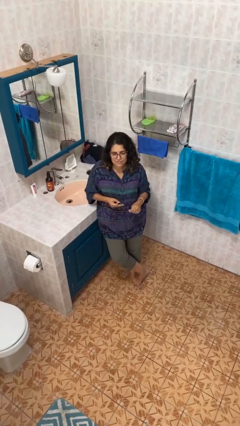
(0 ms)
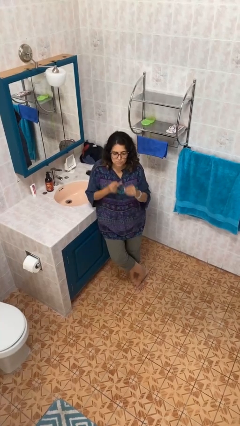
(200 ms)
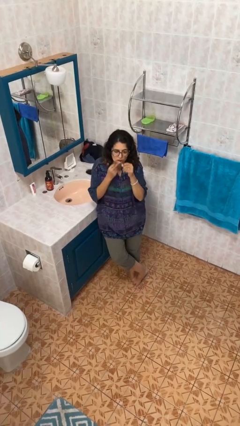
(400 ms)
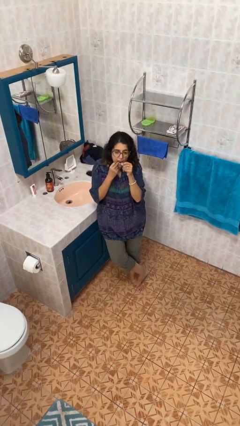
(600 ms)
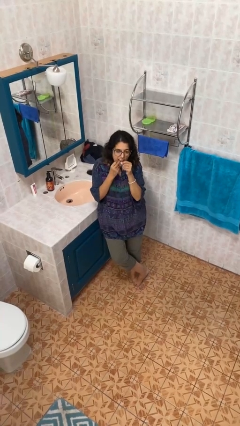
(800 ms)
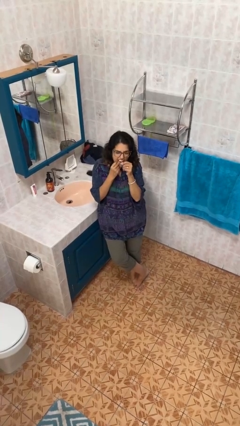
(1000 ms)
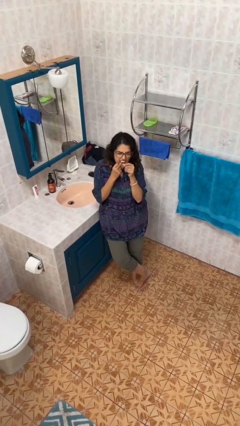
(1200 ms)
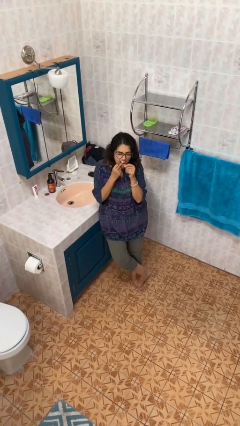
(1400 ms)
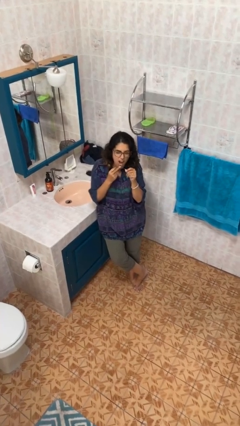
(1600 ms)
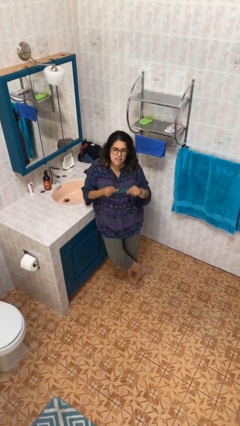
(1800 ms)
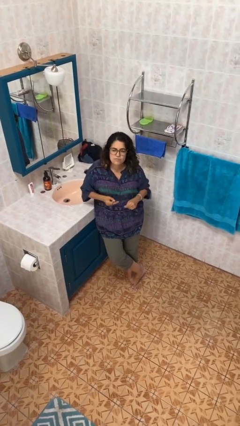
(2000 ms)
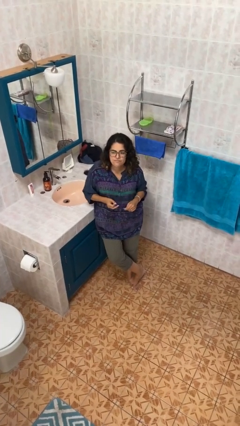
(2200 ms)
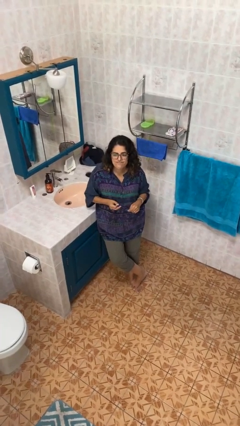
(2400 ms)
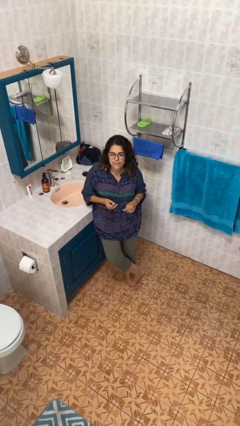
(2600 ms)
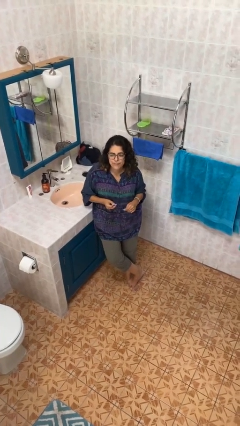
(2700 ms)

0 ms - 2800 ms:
person flosses

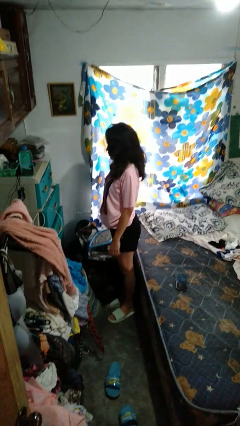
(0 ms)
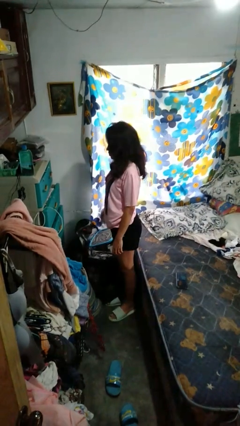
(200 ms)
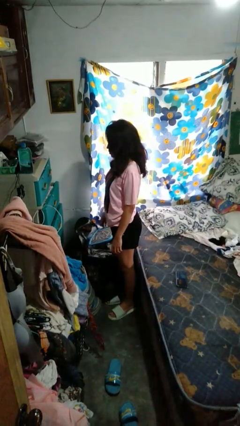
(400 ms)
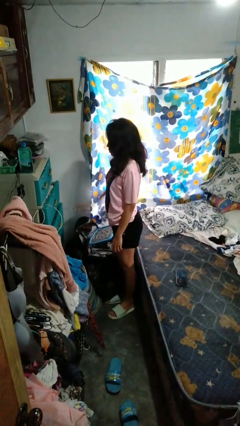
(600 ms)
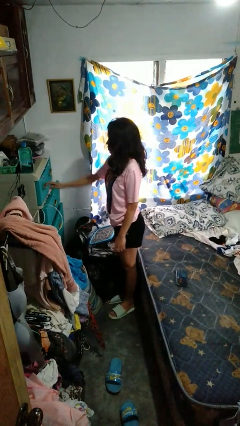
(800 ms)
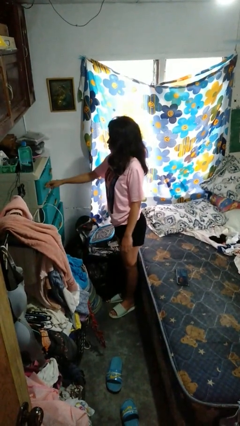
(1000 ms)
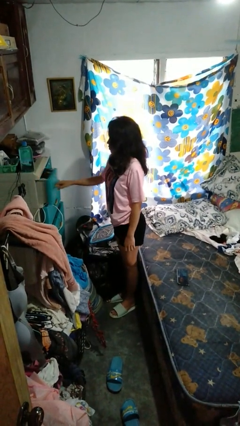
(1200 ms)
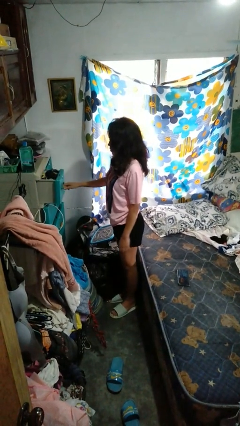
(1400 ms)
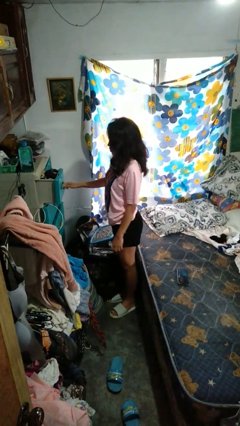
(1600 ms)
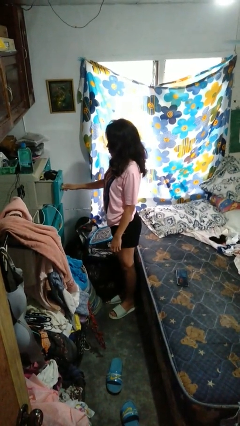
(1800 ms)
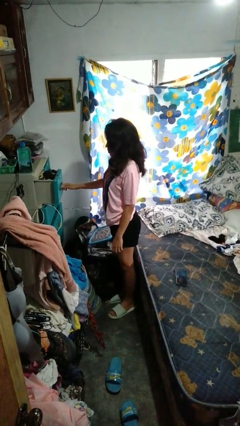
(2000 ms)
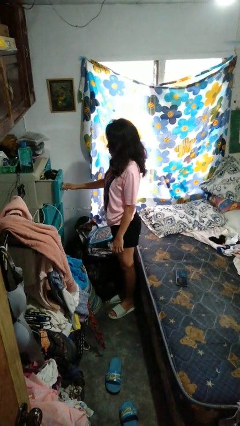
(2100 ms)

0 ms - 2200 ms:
person opens dresser drawer

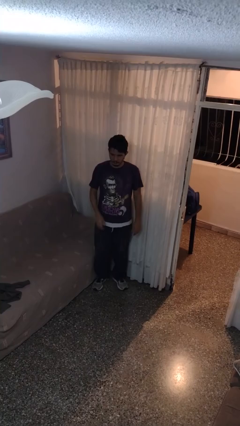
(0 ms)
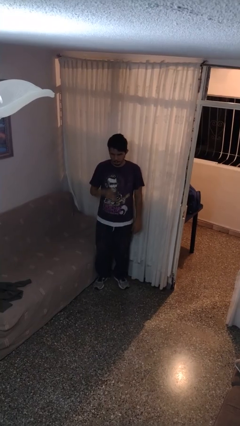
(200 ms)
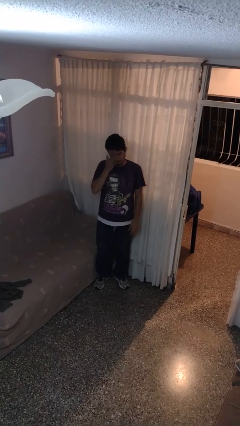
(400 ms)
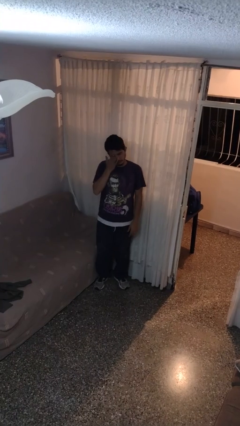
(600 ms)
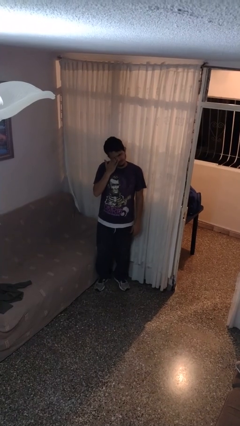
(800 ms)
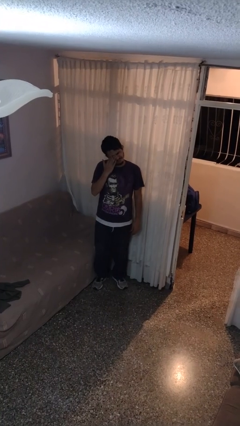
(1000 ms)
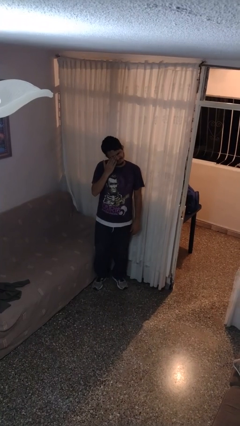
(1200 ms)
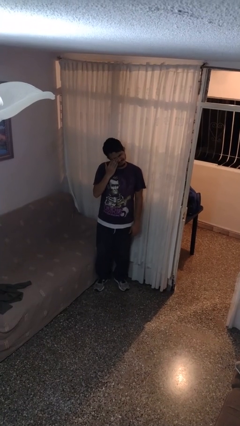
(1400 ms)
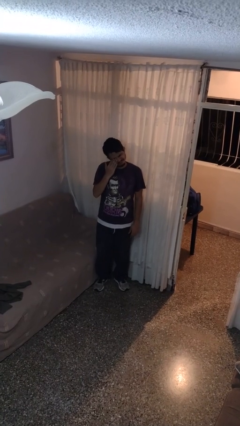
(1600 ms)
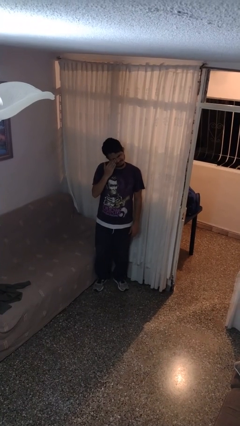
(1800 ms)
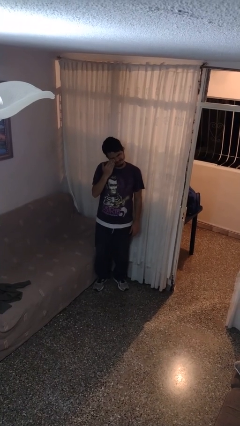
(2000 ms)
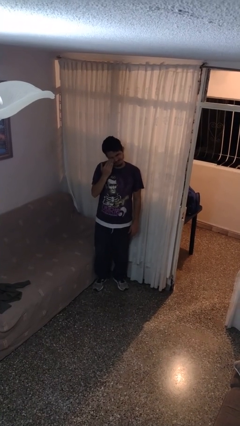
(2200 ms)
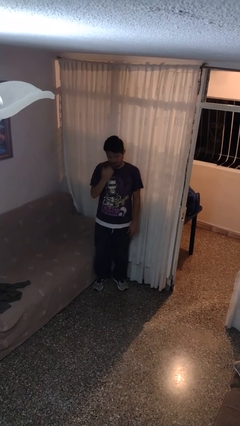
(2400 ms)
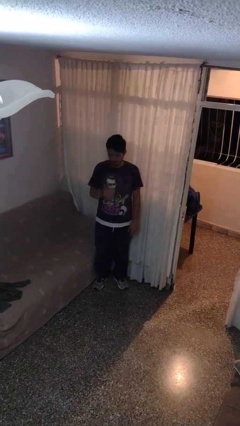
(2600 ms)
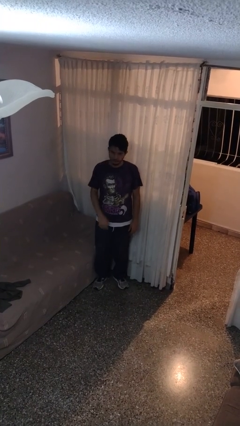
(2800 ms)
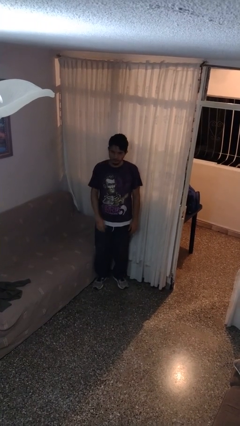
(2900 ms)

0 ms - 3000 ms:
person rubs eyes

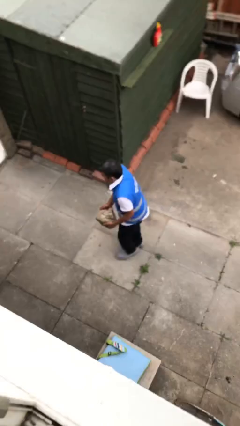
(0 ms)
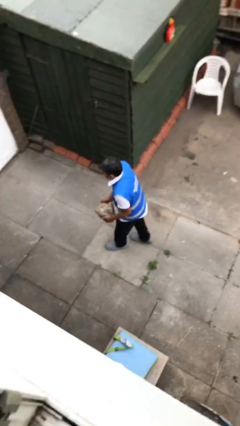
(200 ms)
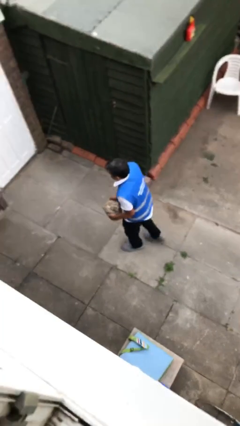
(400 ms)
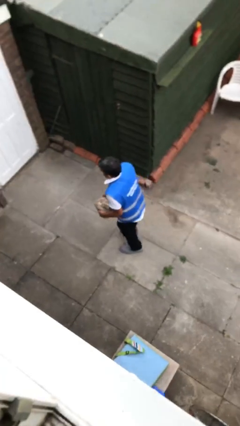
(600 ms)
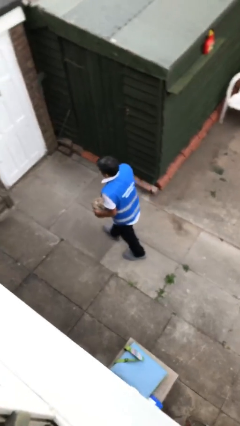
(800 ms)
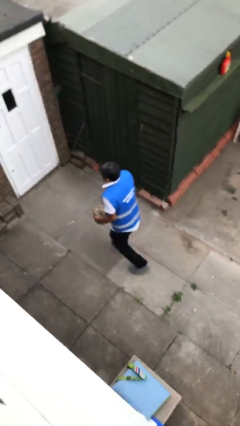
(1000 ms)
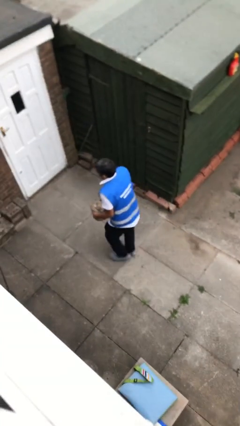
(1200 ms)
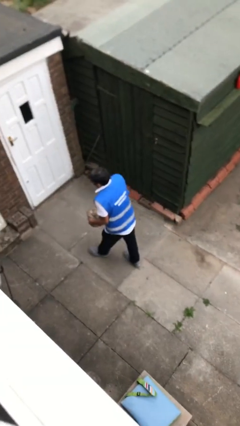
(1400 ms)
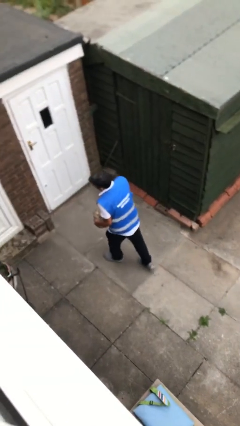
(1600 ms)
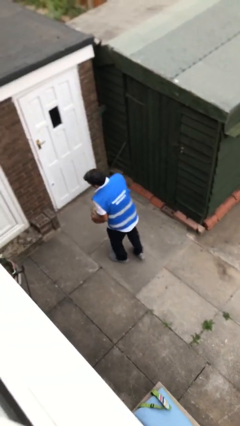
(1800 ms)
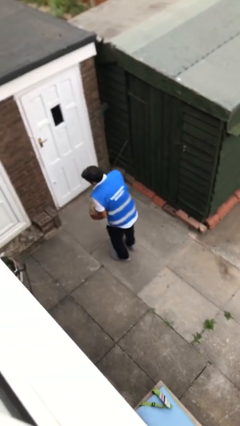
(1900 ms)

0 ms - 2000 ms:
person carries heavy object

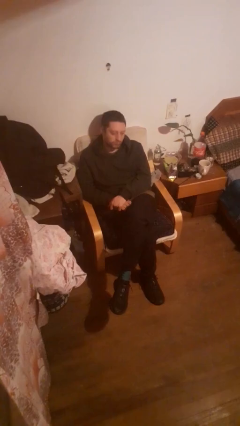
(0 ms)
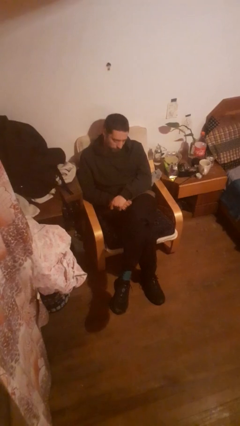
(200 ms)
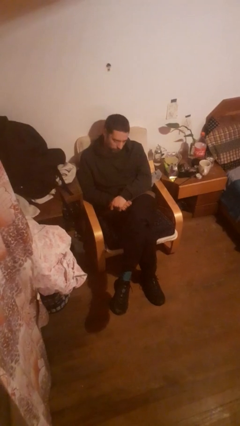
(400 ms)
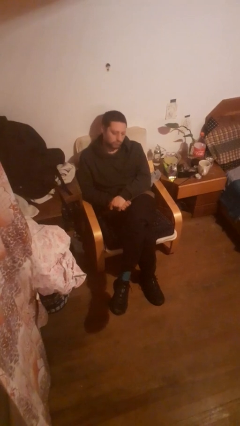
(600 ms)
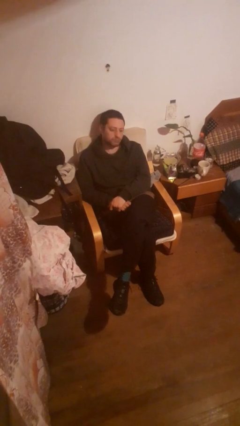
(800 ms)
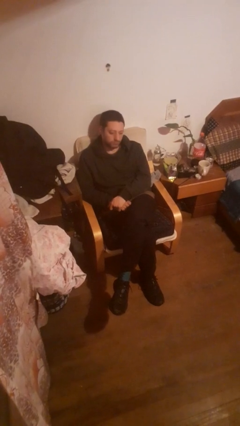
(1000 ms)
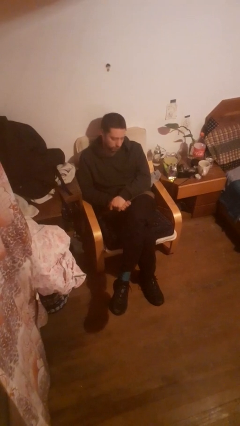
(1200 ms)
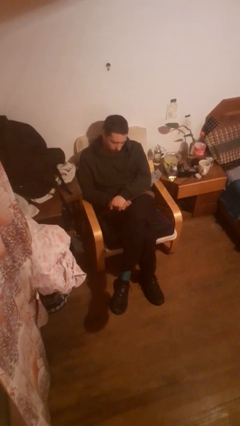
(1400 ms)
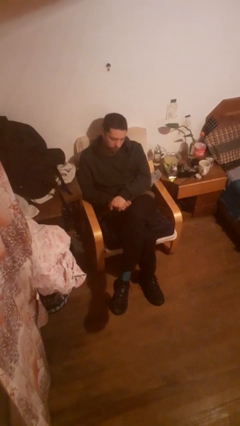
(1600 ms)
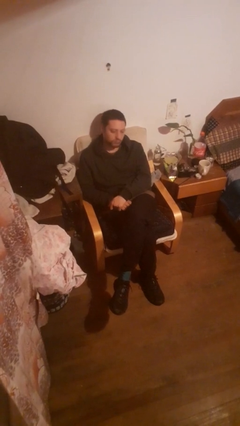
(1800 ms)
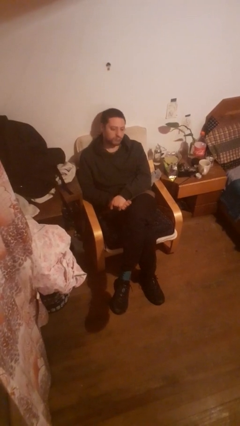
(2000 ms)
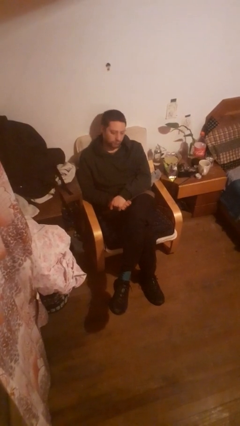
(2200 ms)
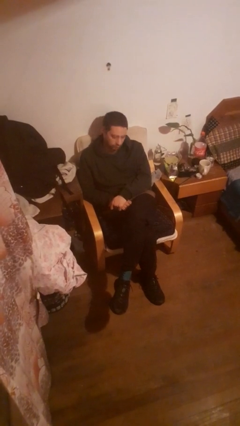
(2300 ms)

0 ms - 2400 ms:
person nods head

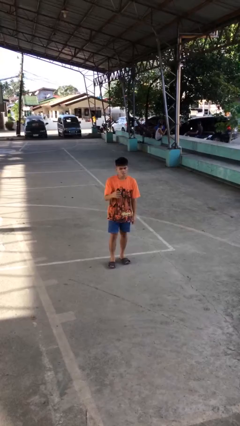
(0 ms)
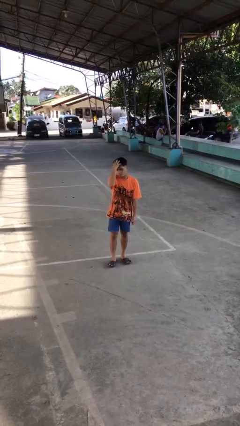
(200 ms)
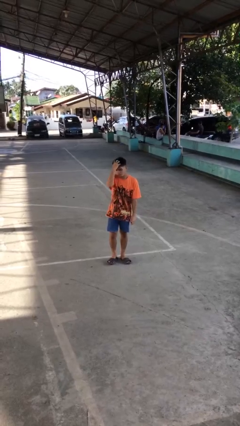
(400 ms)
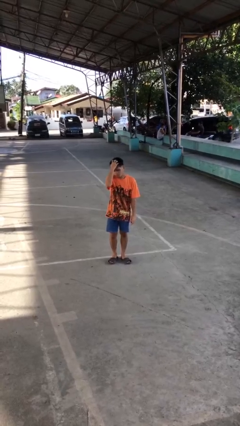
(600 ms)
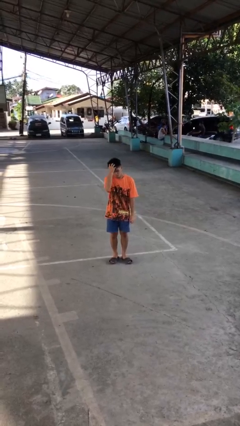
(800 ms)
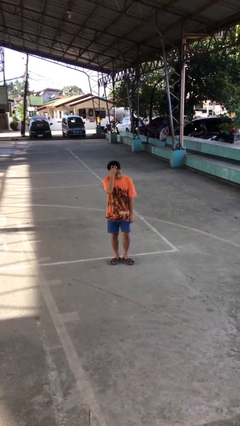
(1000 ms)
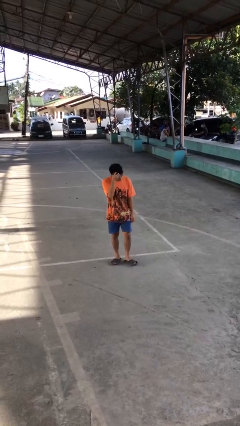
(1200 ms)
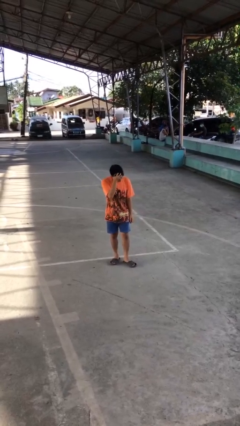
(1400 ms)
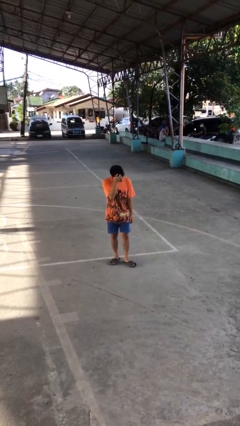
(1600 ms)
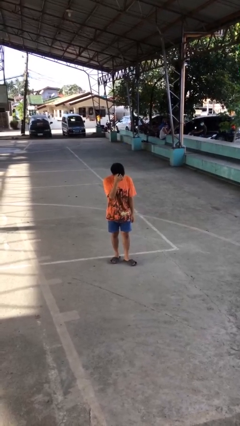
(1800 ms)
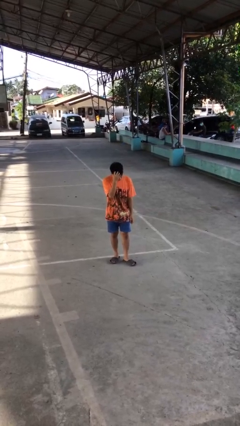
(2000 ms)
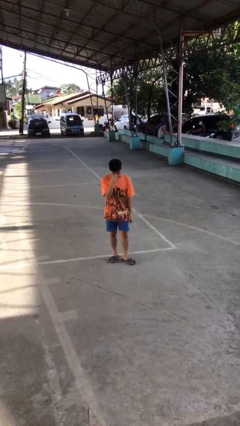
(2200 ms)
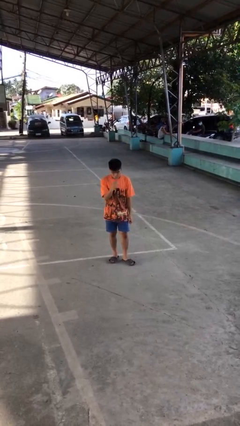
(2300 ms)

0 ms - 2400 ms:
person scratches face

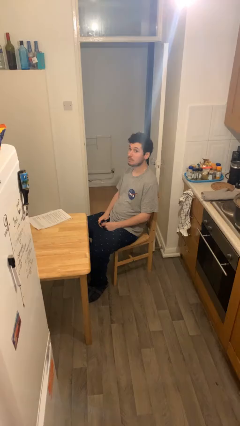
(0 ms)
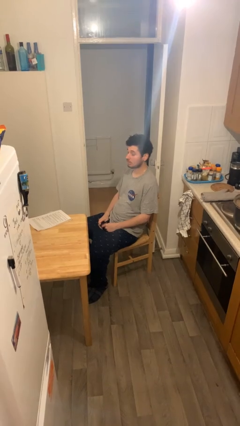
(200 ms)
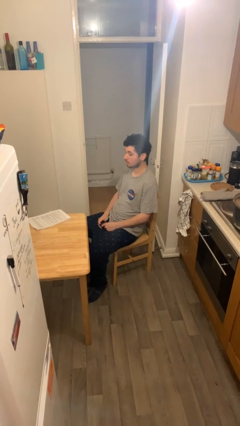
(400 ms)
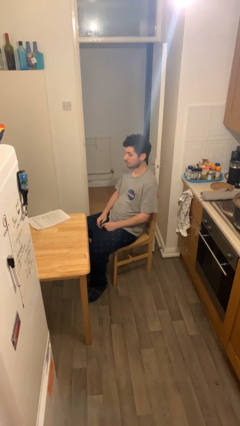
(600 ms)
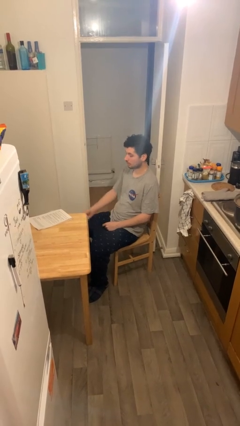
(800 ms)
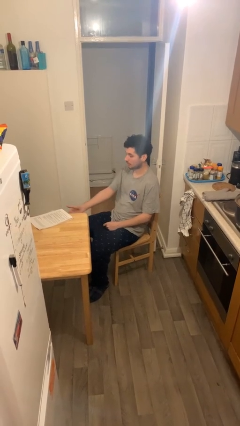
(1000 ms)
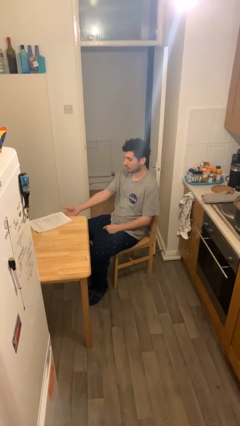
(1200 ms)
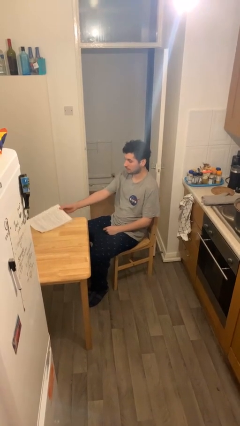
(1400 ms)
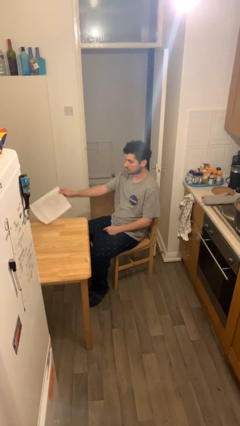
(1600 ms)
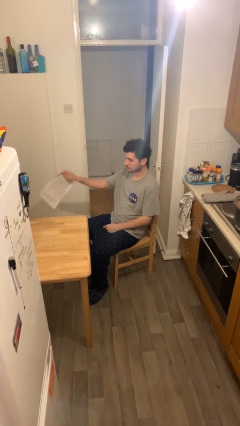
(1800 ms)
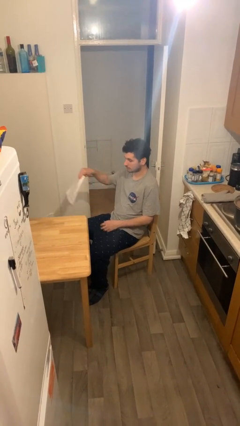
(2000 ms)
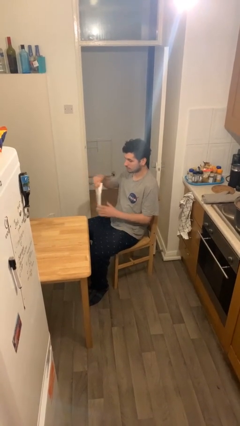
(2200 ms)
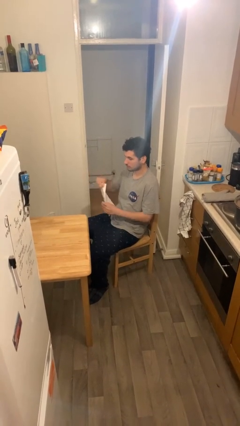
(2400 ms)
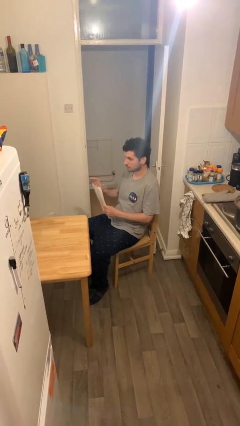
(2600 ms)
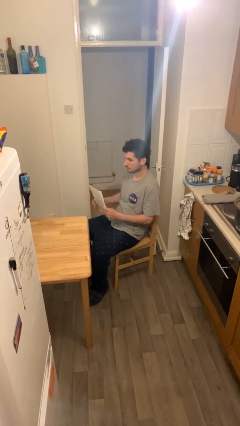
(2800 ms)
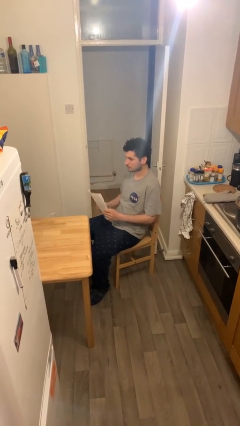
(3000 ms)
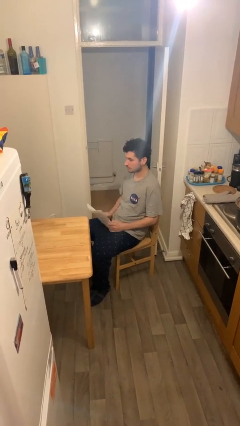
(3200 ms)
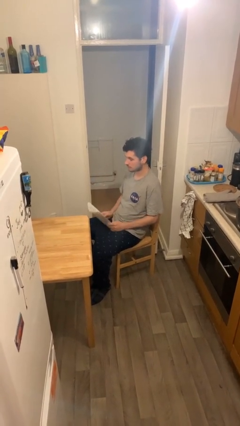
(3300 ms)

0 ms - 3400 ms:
person picks up object from table
